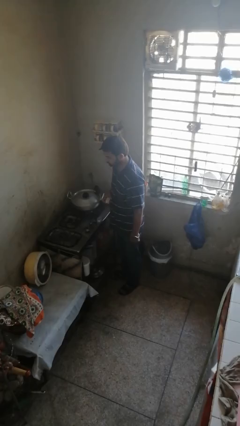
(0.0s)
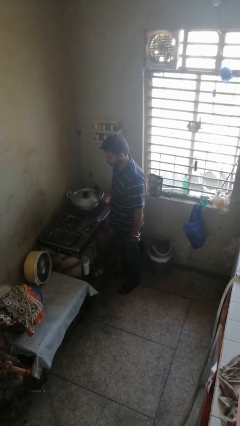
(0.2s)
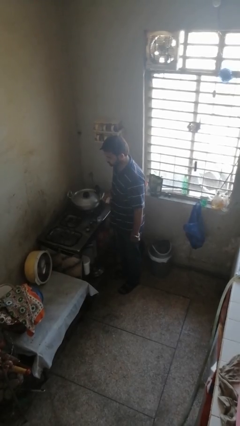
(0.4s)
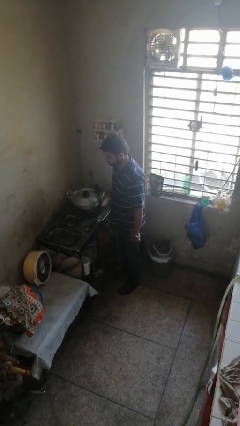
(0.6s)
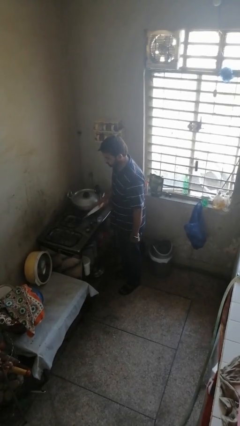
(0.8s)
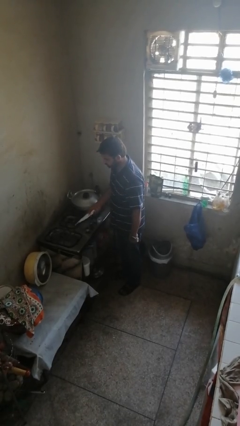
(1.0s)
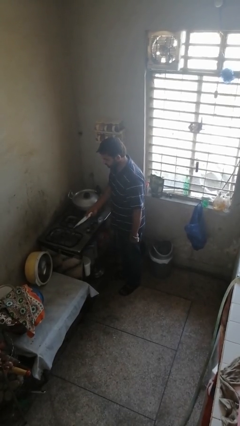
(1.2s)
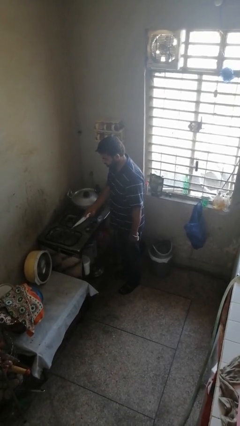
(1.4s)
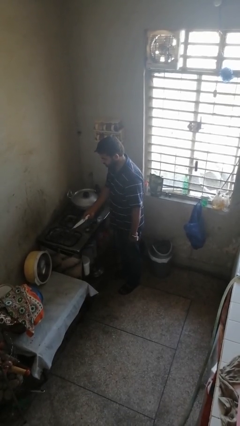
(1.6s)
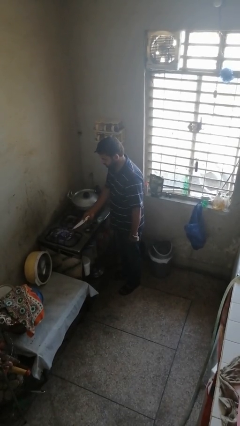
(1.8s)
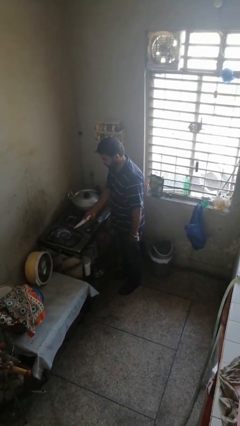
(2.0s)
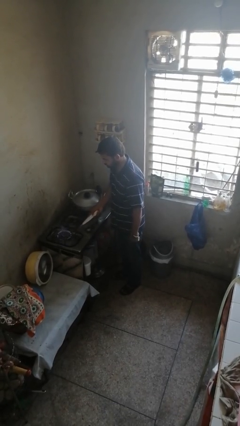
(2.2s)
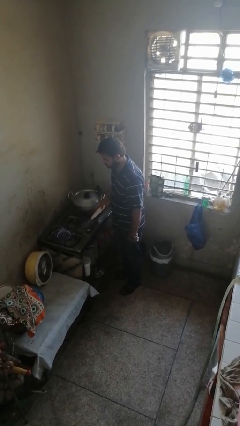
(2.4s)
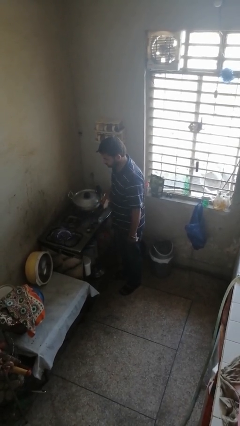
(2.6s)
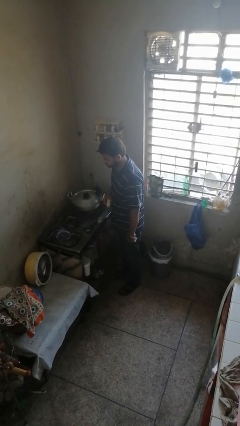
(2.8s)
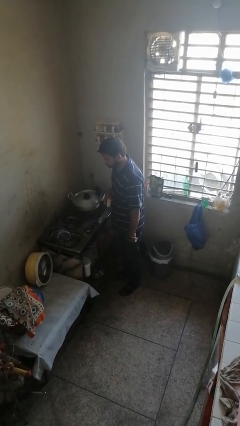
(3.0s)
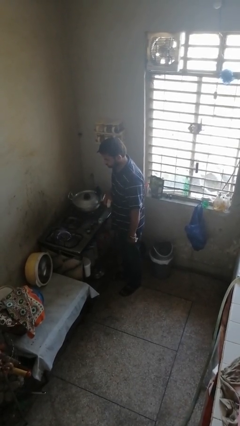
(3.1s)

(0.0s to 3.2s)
person turns on stovetop

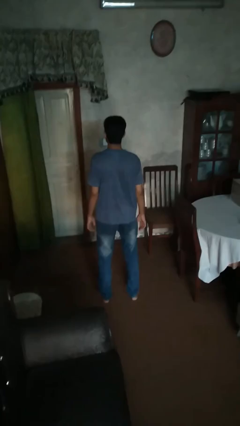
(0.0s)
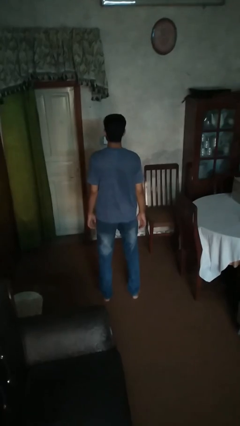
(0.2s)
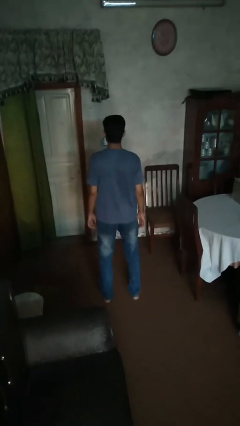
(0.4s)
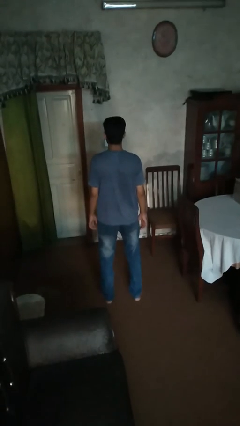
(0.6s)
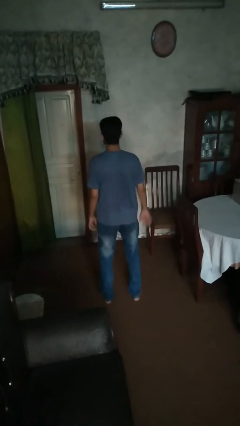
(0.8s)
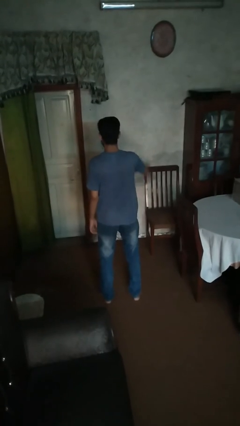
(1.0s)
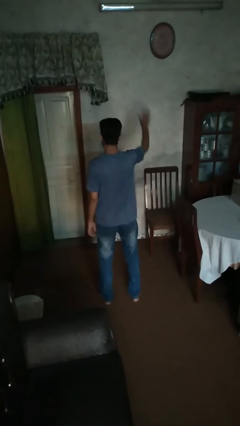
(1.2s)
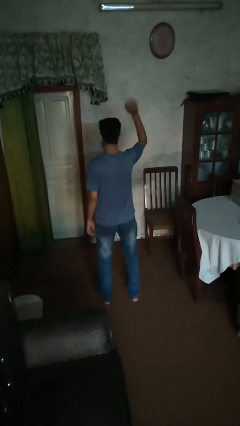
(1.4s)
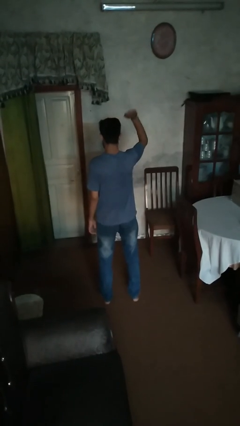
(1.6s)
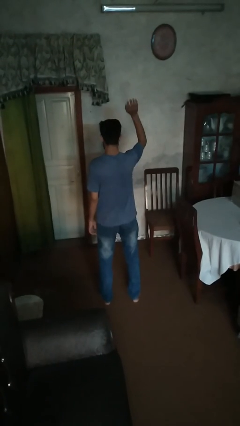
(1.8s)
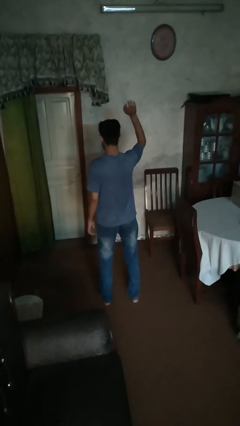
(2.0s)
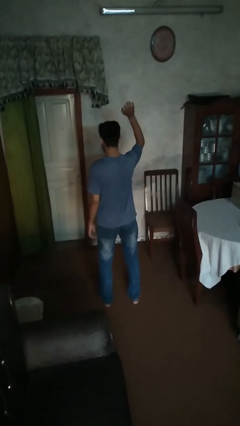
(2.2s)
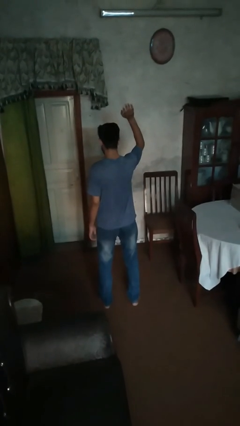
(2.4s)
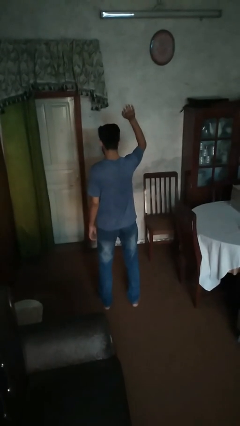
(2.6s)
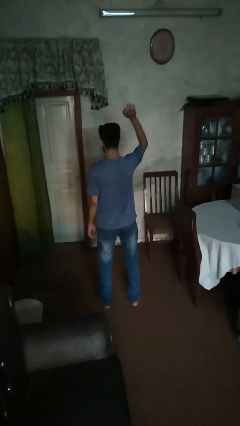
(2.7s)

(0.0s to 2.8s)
person gestures raise hand

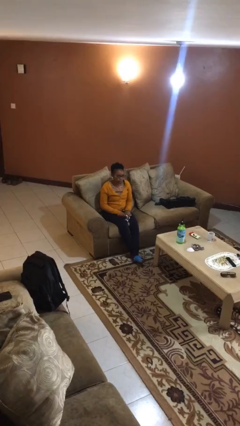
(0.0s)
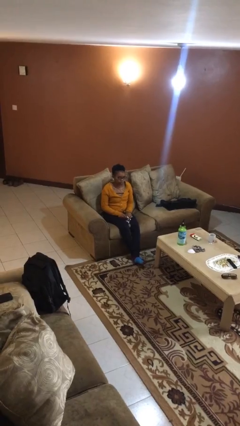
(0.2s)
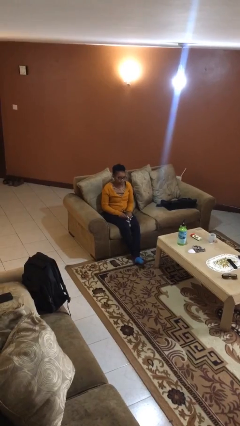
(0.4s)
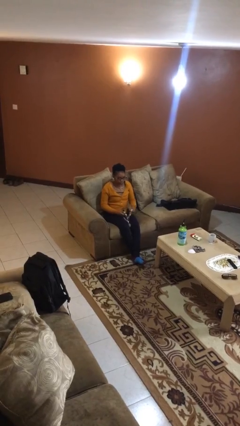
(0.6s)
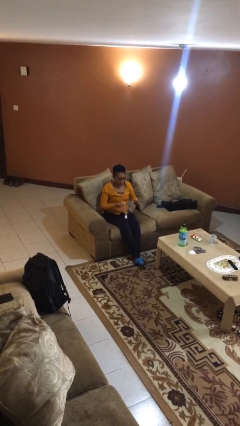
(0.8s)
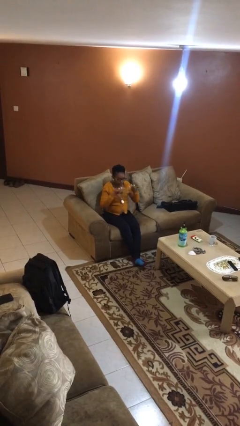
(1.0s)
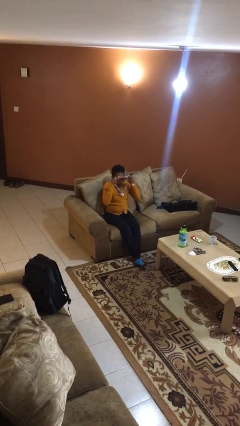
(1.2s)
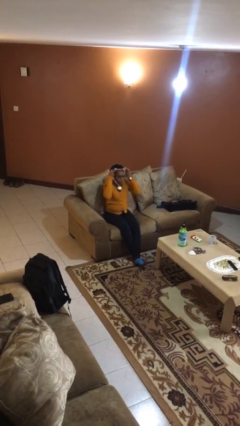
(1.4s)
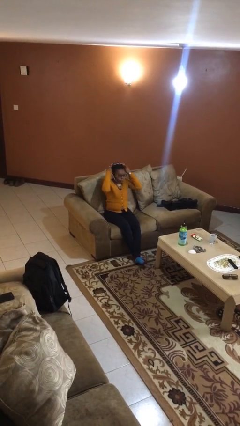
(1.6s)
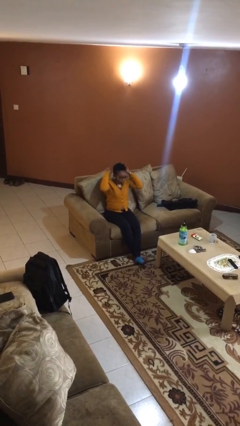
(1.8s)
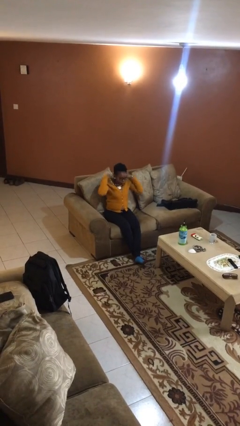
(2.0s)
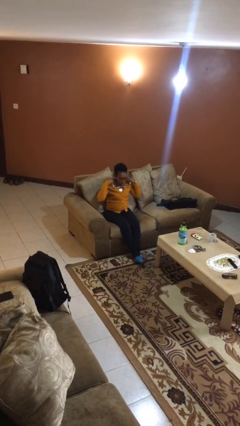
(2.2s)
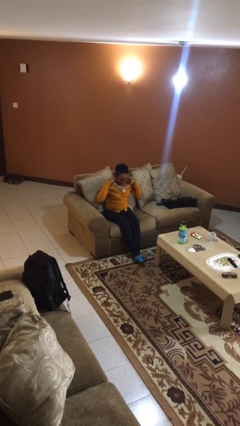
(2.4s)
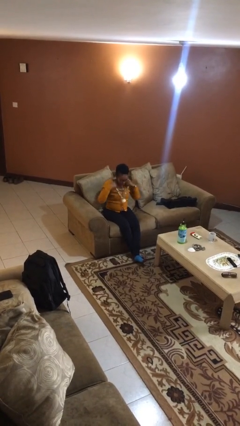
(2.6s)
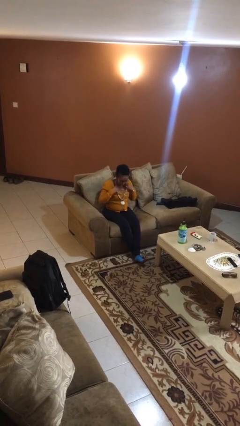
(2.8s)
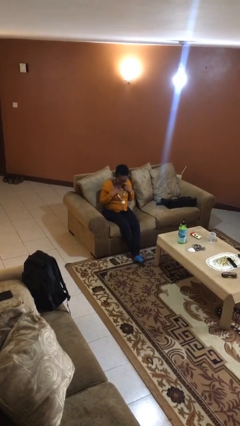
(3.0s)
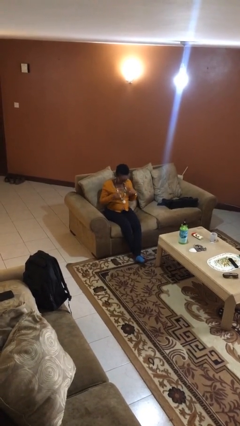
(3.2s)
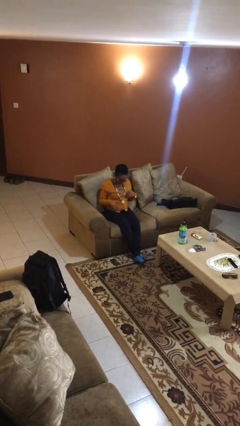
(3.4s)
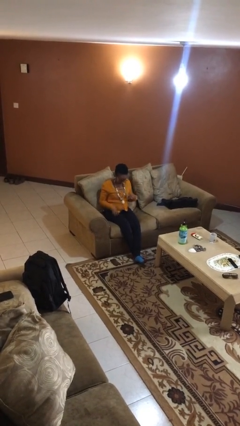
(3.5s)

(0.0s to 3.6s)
person puts on necklace

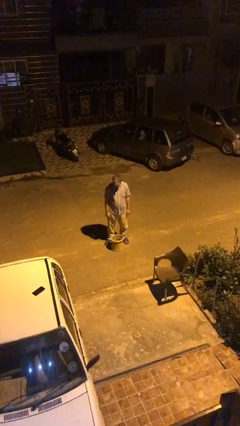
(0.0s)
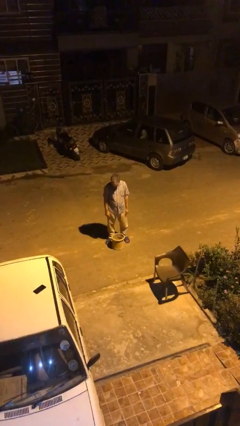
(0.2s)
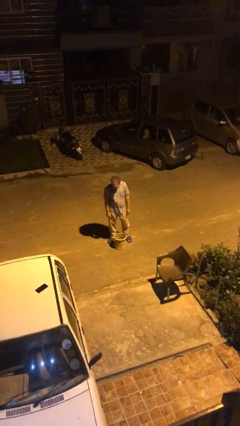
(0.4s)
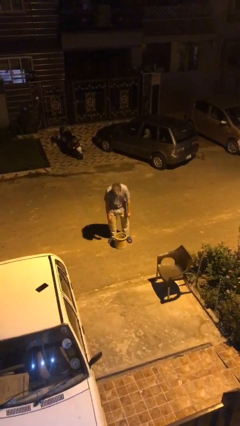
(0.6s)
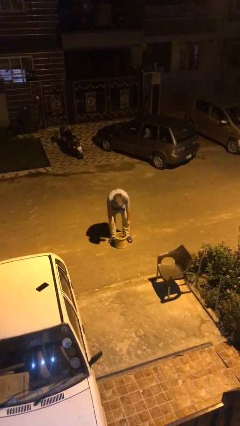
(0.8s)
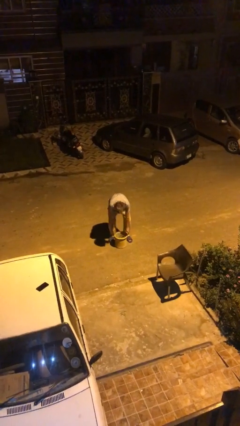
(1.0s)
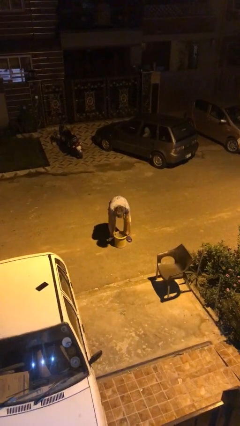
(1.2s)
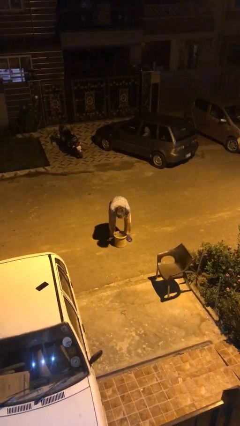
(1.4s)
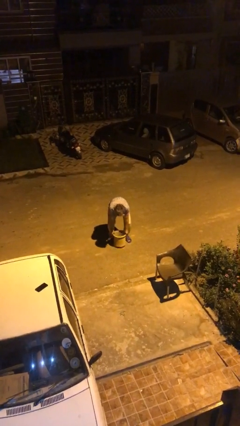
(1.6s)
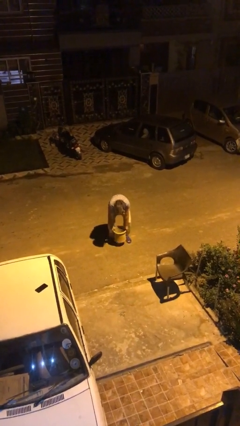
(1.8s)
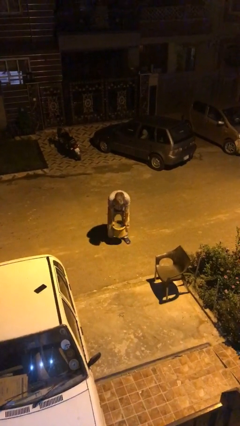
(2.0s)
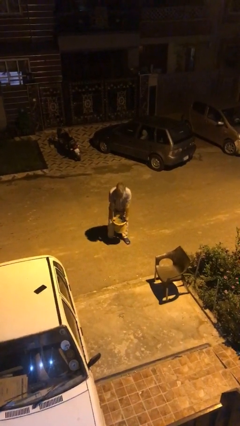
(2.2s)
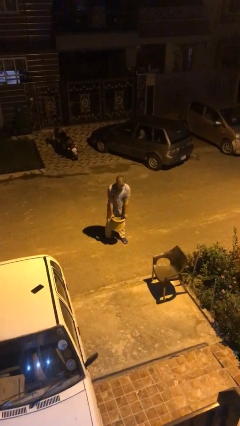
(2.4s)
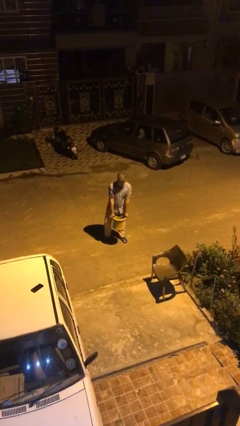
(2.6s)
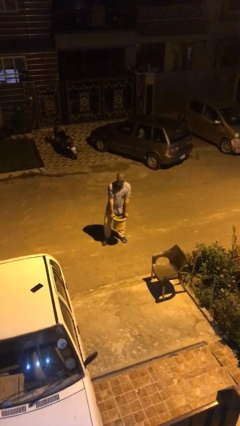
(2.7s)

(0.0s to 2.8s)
person picks up object from floor

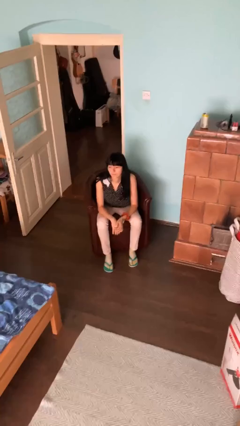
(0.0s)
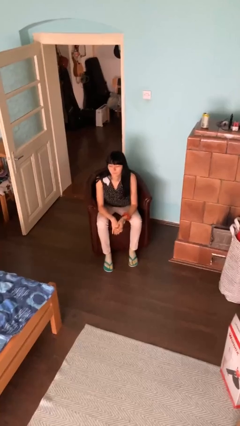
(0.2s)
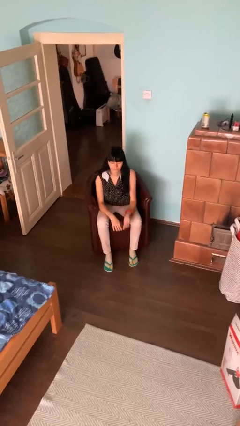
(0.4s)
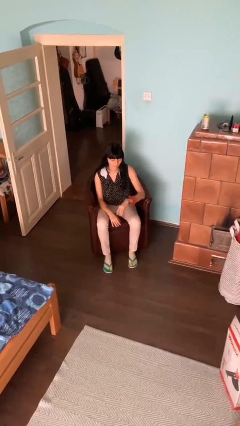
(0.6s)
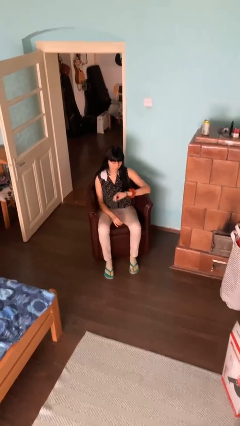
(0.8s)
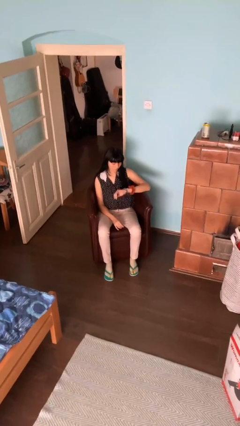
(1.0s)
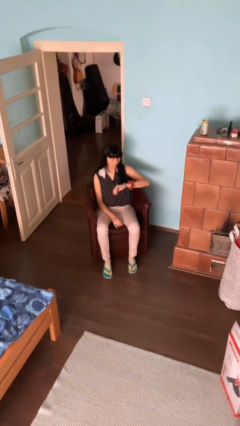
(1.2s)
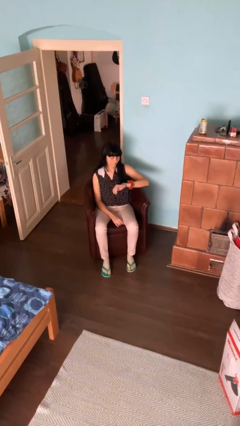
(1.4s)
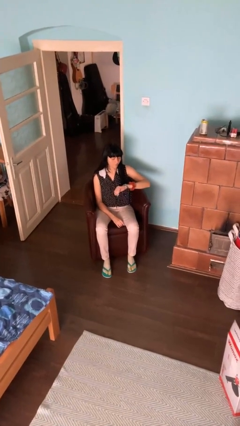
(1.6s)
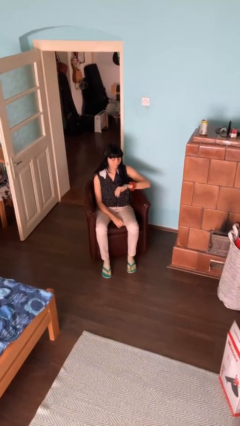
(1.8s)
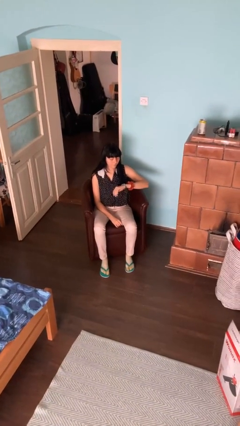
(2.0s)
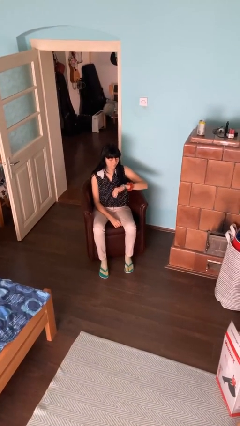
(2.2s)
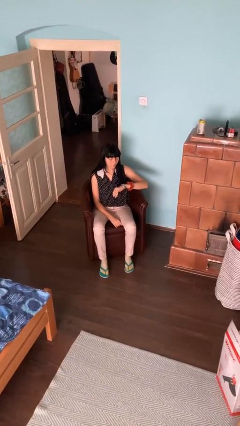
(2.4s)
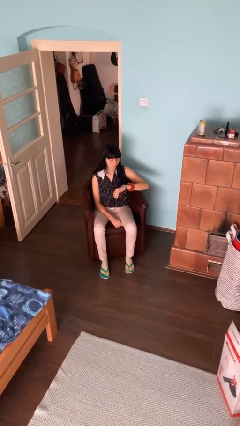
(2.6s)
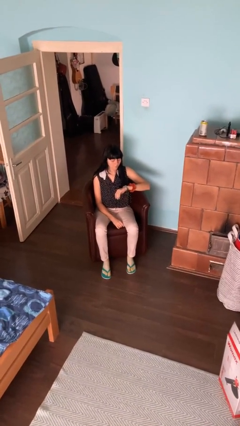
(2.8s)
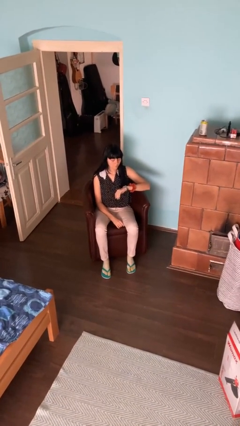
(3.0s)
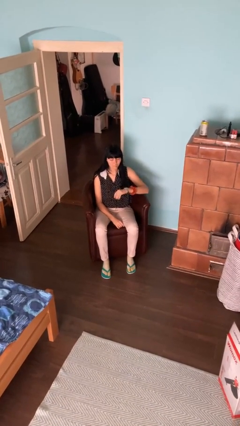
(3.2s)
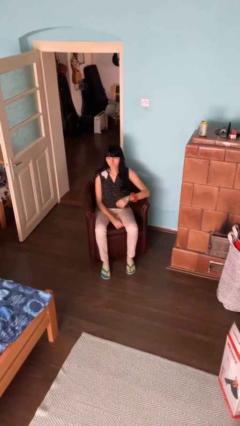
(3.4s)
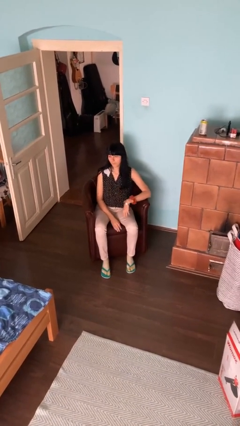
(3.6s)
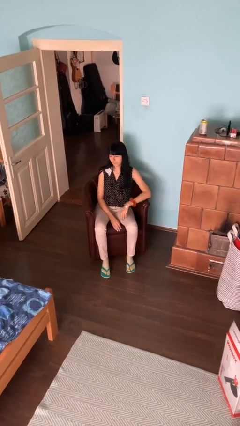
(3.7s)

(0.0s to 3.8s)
person looks at wristwatch

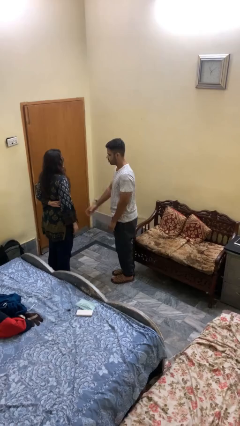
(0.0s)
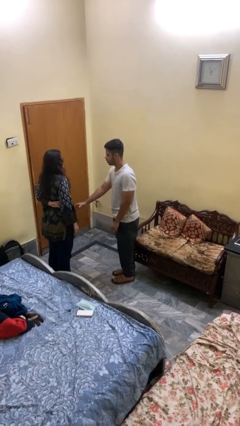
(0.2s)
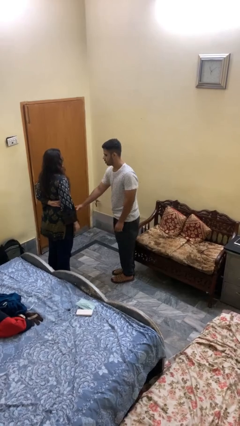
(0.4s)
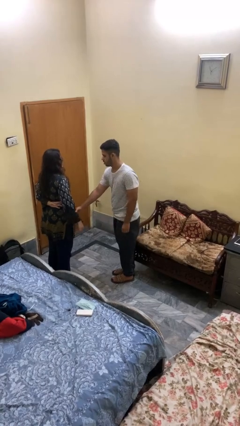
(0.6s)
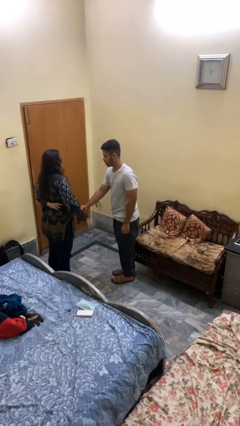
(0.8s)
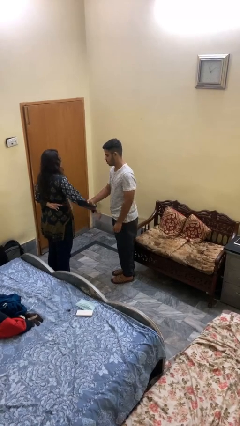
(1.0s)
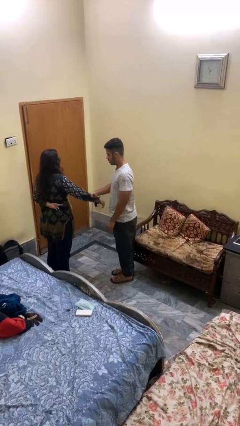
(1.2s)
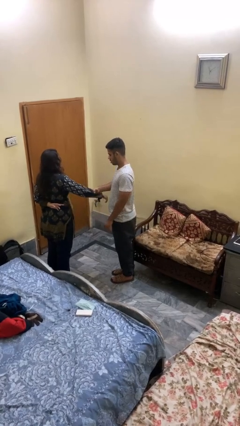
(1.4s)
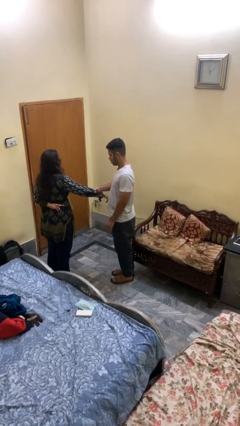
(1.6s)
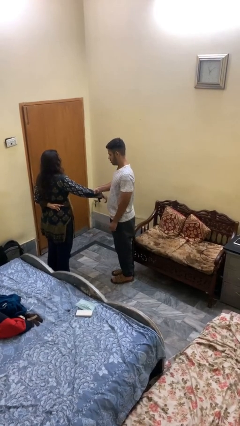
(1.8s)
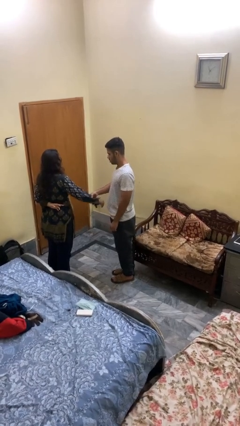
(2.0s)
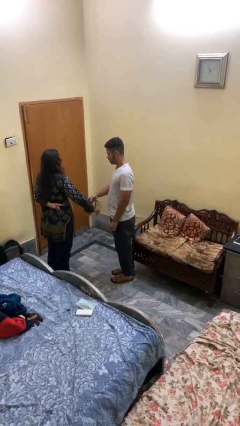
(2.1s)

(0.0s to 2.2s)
person grabs person by forearm
